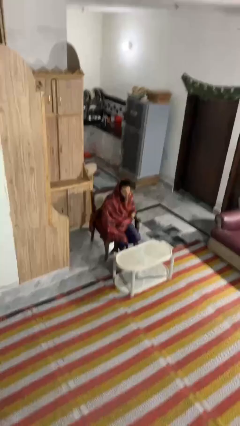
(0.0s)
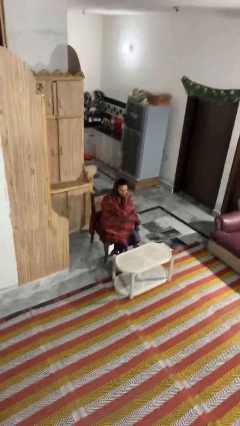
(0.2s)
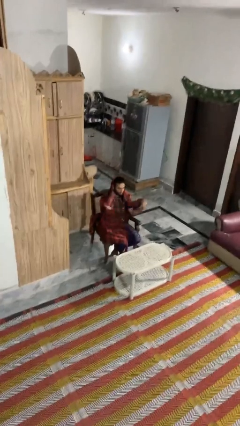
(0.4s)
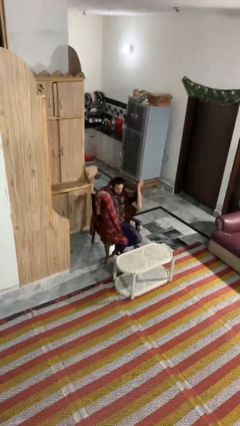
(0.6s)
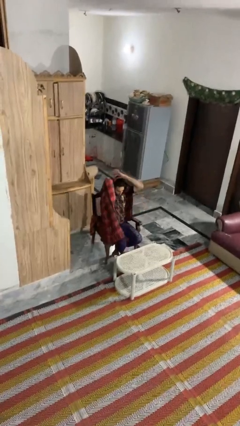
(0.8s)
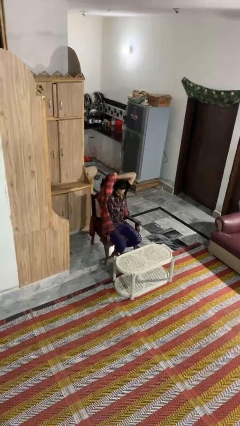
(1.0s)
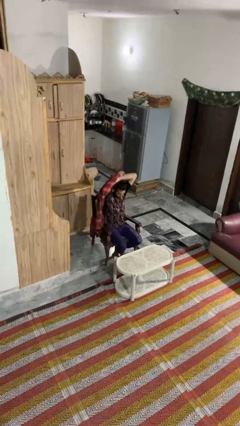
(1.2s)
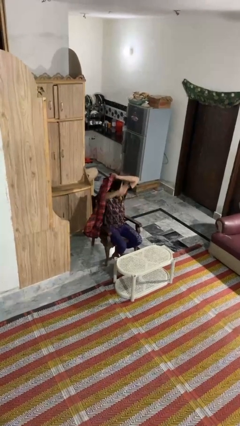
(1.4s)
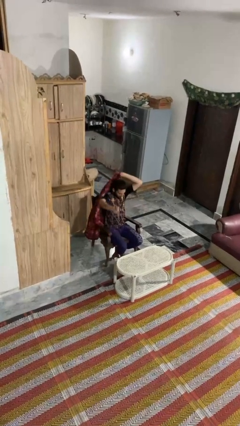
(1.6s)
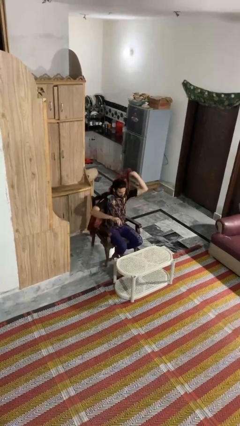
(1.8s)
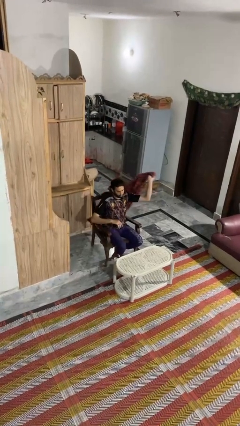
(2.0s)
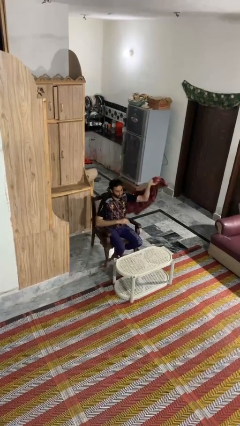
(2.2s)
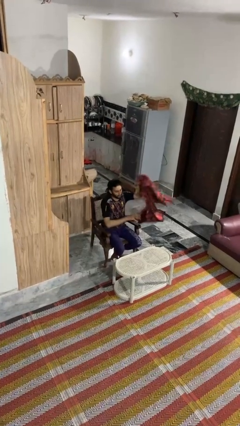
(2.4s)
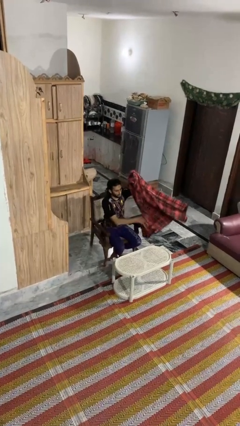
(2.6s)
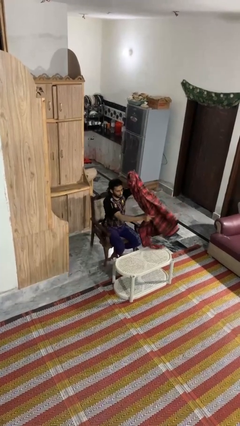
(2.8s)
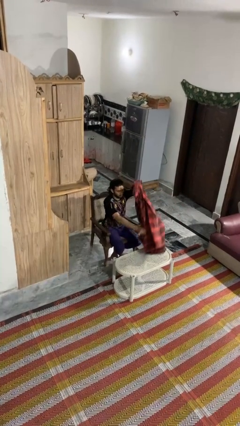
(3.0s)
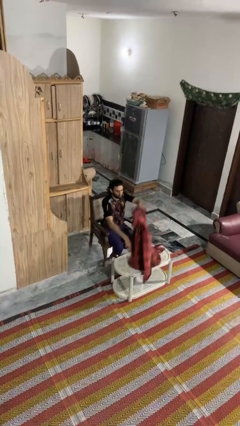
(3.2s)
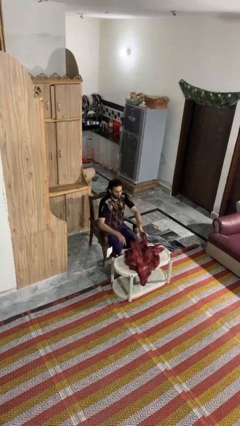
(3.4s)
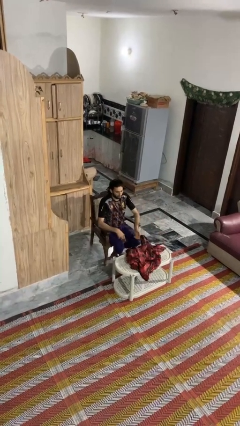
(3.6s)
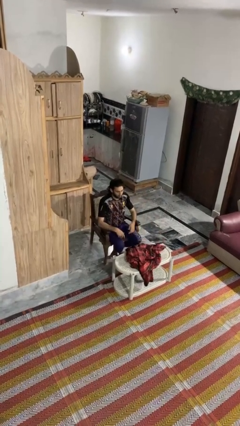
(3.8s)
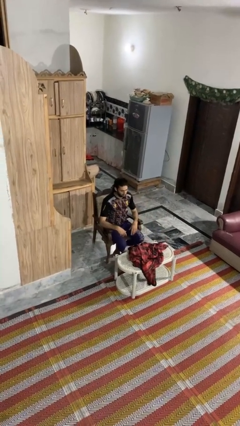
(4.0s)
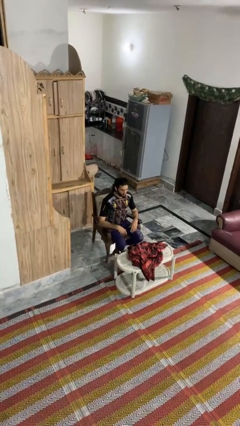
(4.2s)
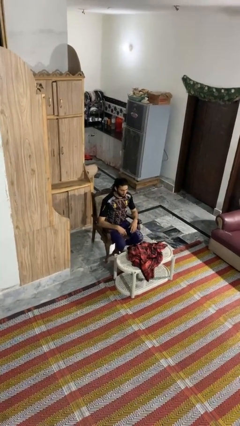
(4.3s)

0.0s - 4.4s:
person uncovers with blanket

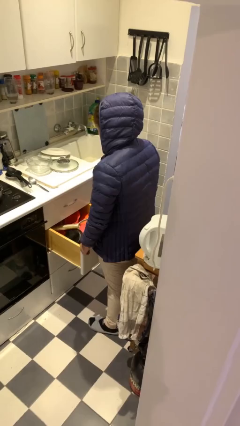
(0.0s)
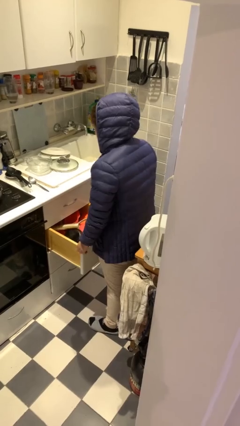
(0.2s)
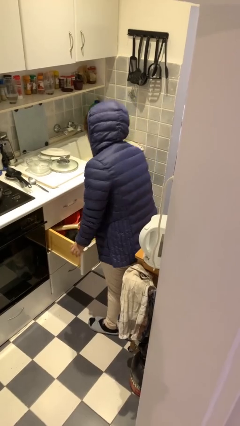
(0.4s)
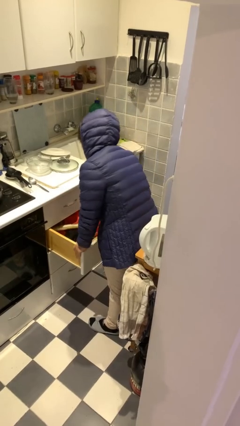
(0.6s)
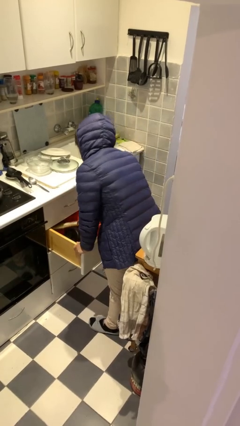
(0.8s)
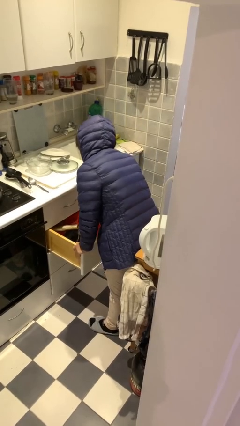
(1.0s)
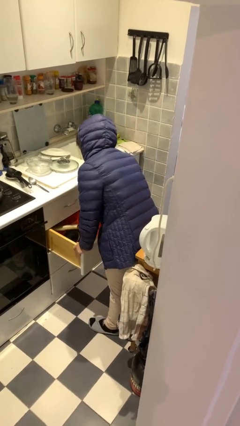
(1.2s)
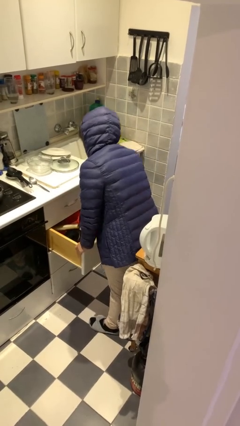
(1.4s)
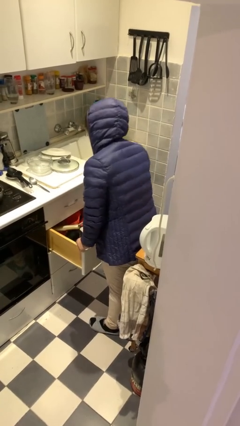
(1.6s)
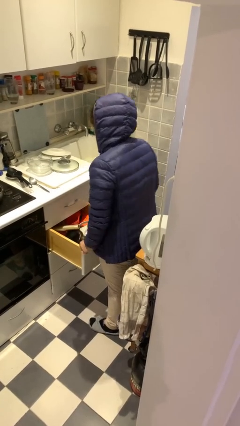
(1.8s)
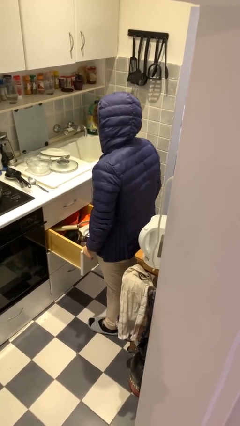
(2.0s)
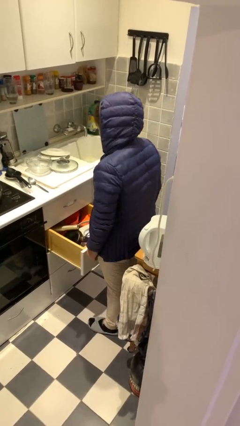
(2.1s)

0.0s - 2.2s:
person searches in kitchen drawer

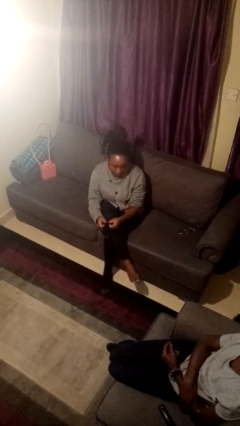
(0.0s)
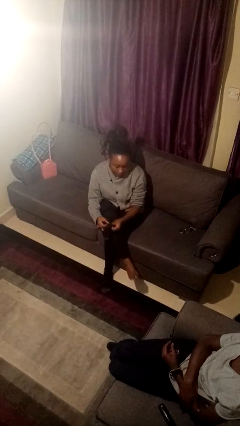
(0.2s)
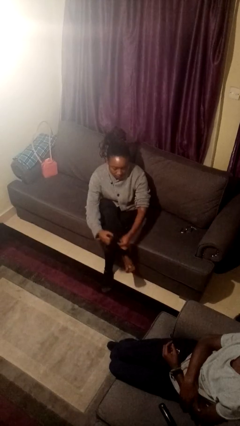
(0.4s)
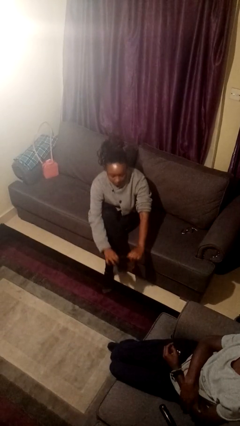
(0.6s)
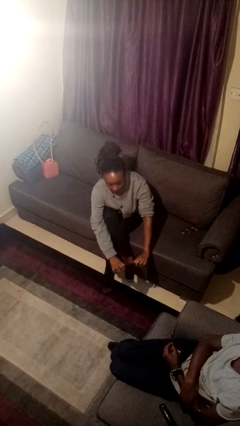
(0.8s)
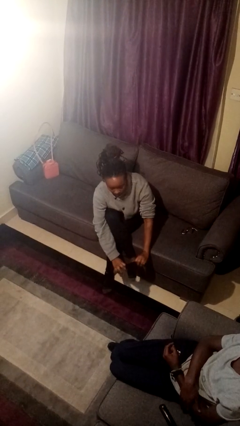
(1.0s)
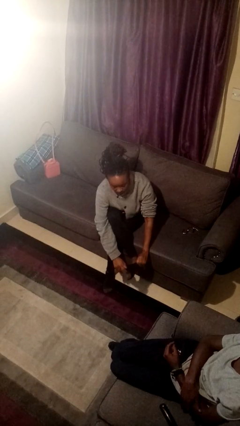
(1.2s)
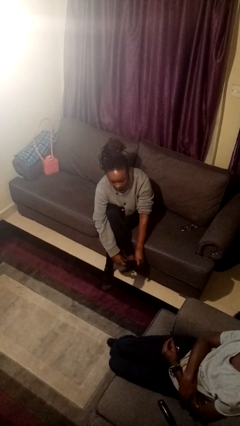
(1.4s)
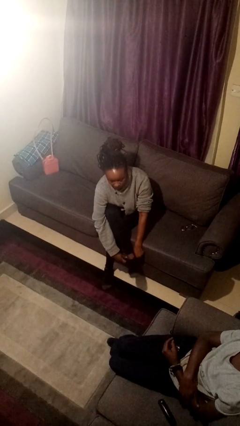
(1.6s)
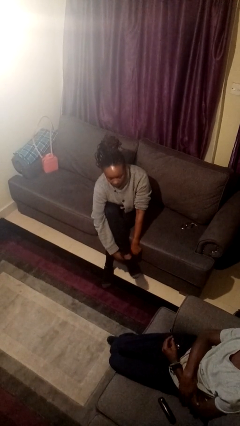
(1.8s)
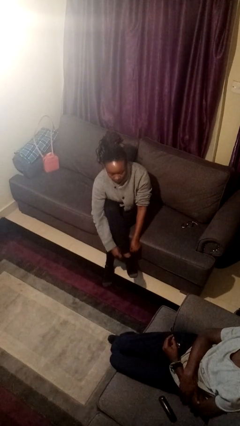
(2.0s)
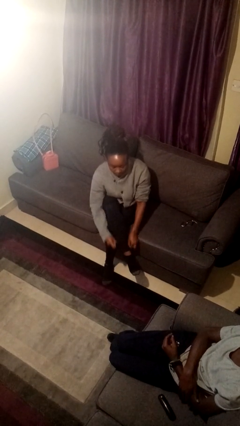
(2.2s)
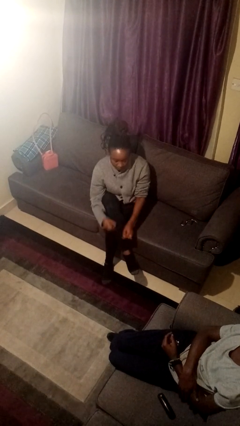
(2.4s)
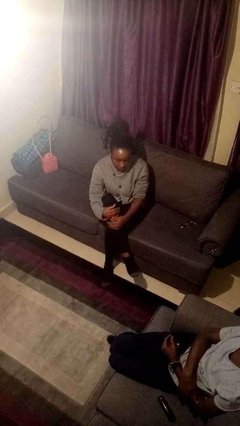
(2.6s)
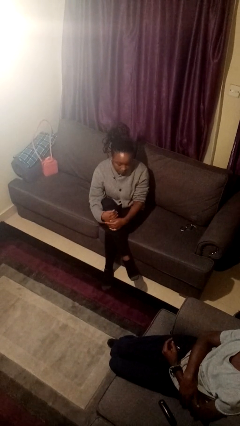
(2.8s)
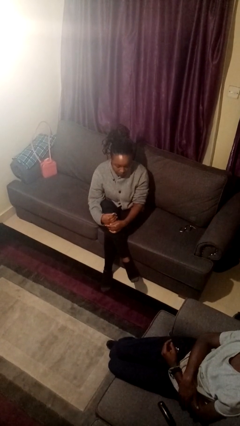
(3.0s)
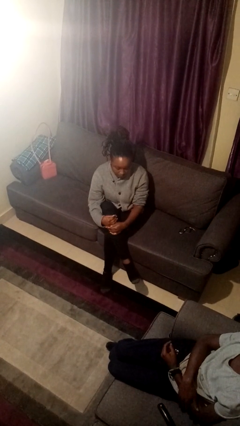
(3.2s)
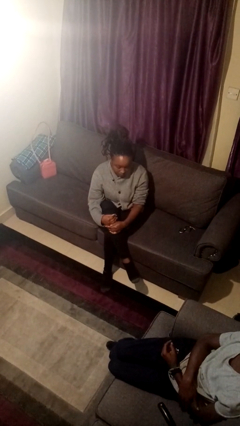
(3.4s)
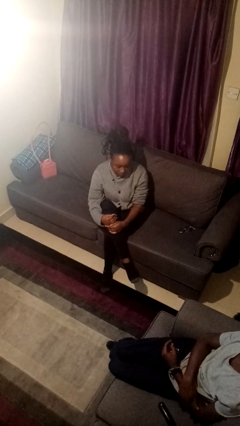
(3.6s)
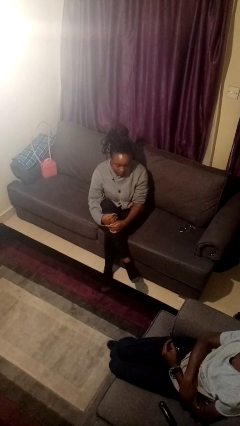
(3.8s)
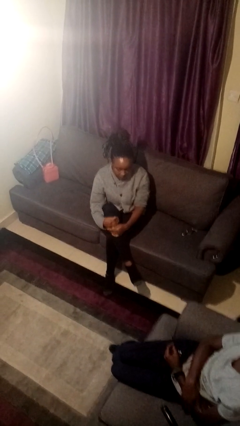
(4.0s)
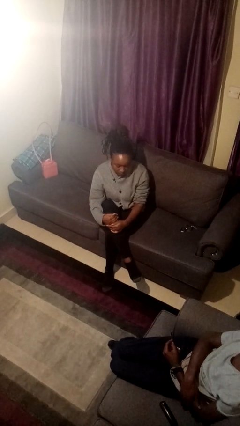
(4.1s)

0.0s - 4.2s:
person puts on socks

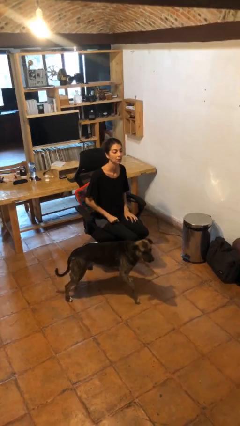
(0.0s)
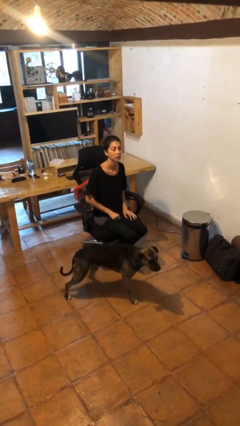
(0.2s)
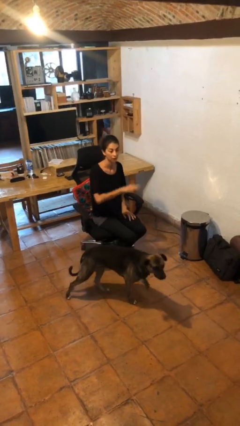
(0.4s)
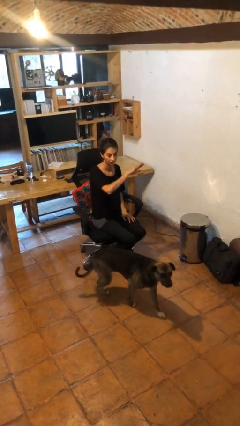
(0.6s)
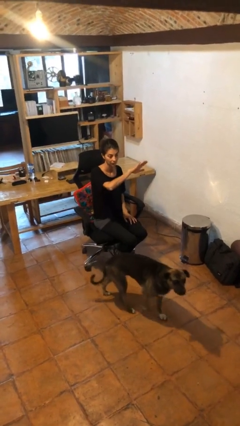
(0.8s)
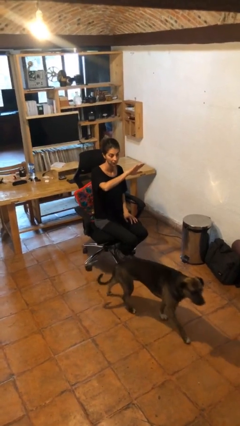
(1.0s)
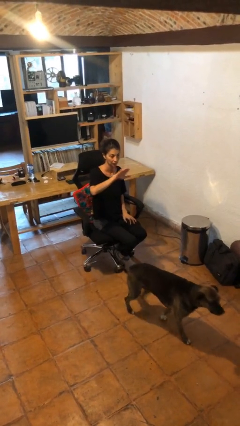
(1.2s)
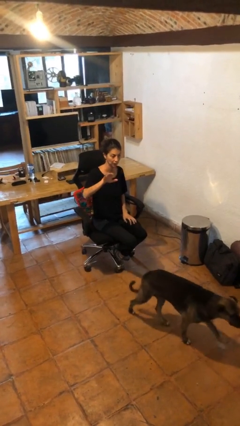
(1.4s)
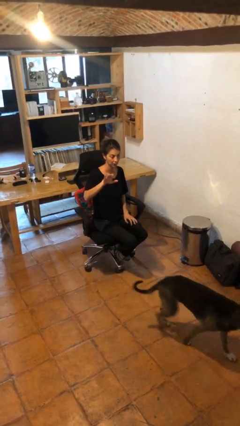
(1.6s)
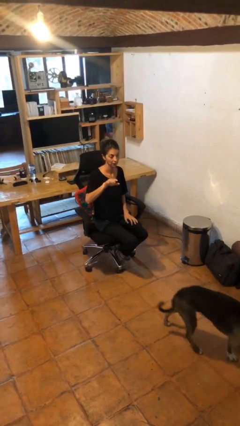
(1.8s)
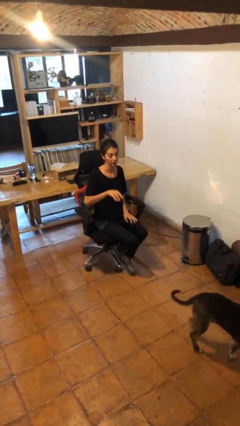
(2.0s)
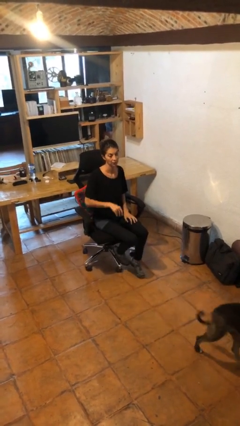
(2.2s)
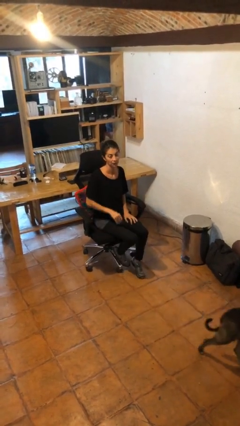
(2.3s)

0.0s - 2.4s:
person gestures swipe right

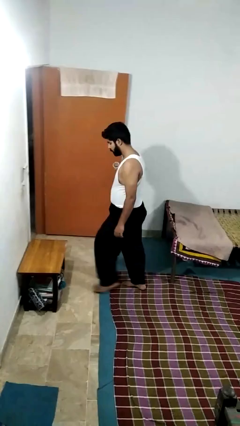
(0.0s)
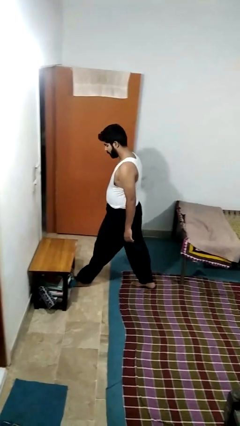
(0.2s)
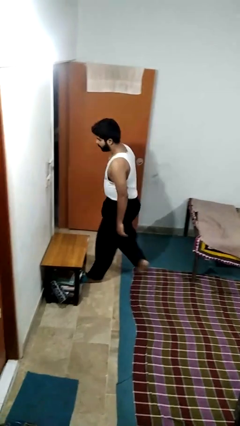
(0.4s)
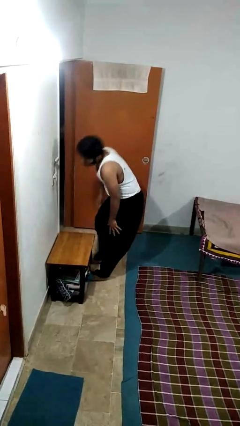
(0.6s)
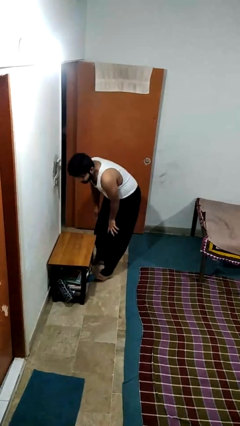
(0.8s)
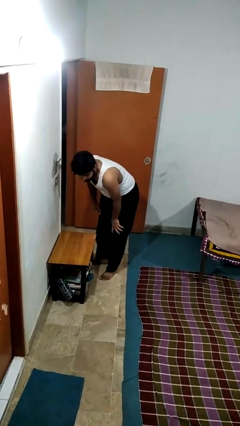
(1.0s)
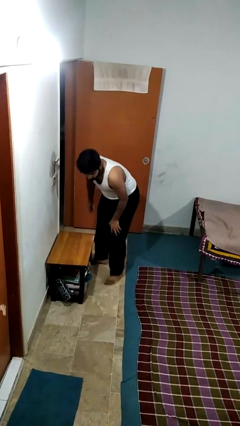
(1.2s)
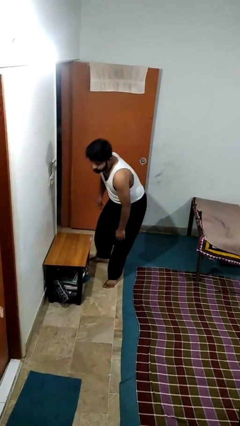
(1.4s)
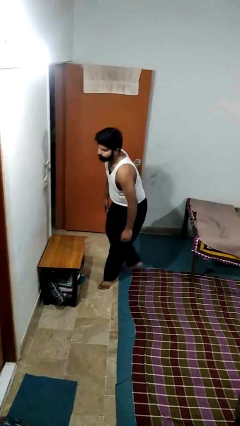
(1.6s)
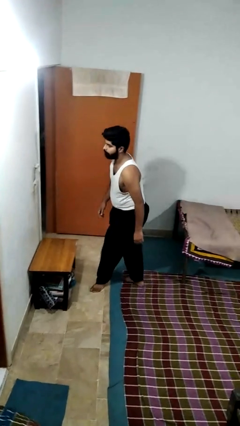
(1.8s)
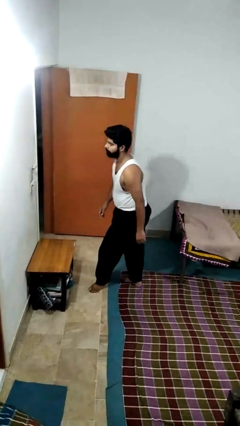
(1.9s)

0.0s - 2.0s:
person bumps into table

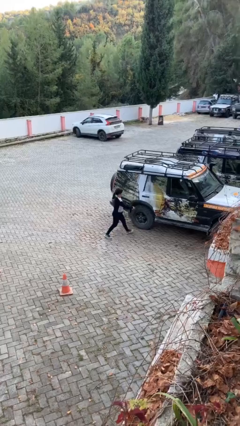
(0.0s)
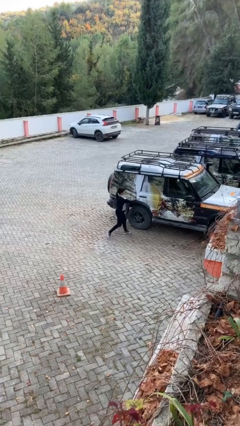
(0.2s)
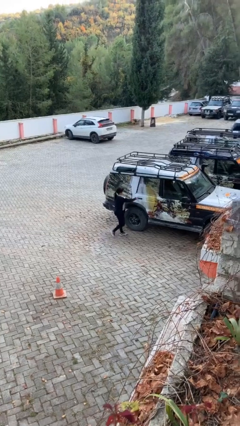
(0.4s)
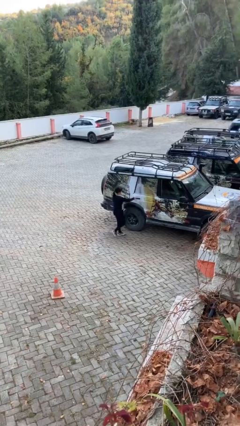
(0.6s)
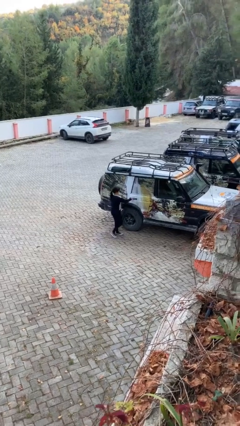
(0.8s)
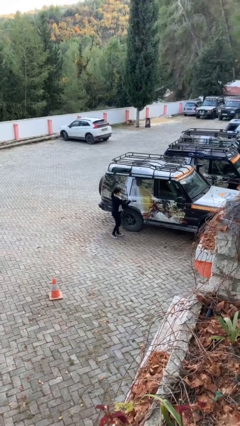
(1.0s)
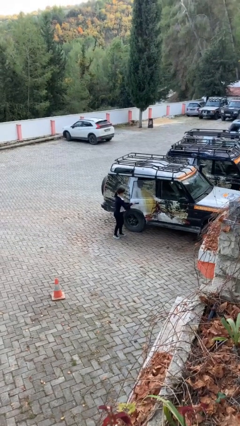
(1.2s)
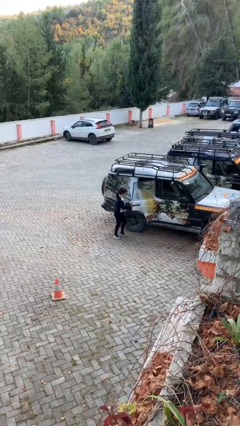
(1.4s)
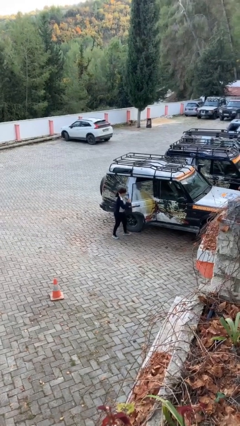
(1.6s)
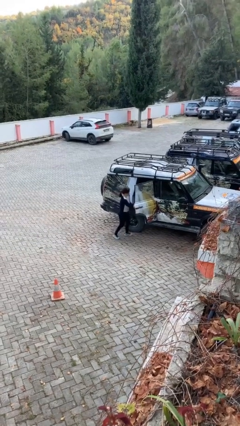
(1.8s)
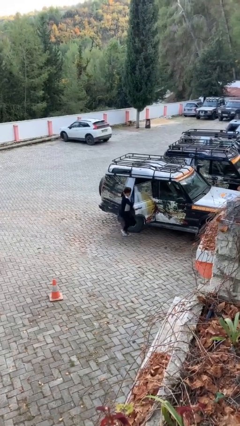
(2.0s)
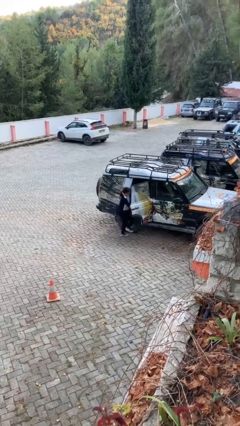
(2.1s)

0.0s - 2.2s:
person opens car door
